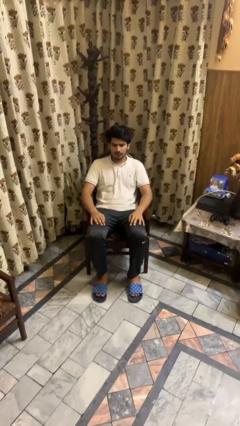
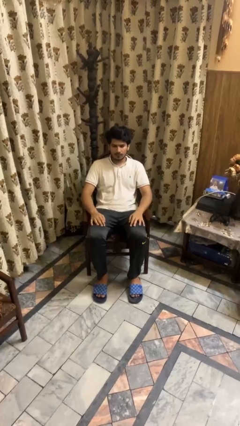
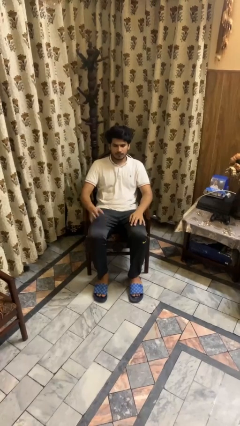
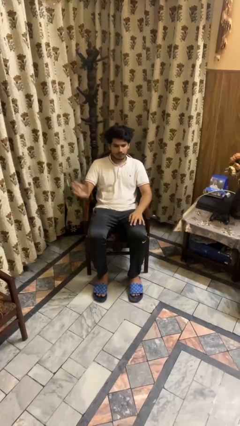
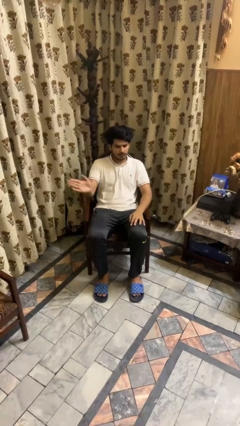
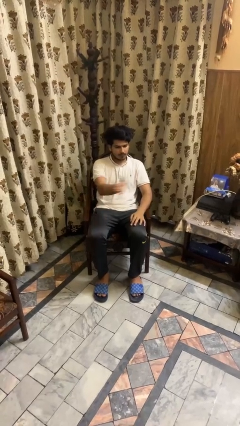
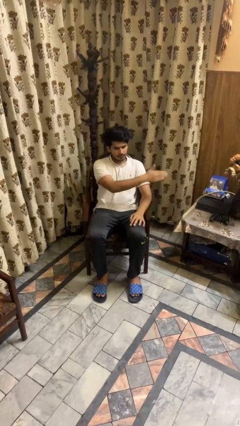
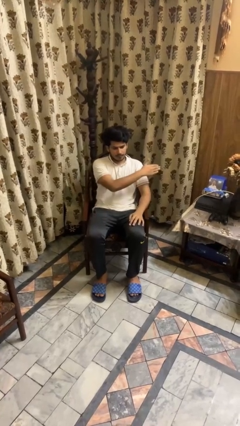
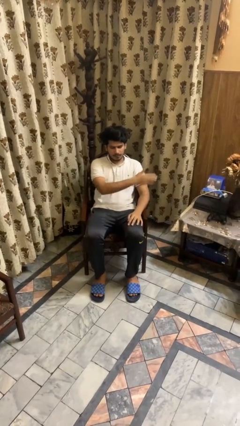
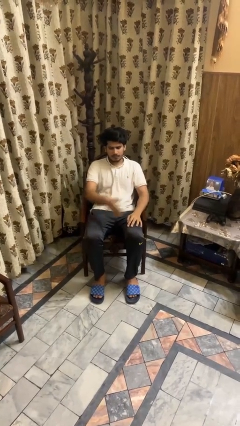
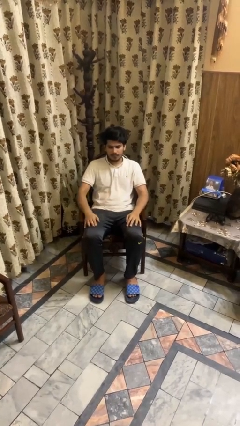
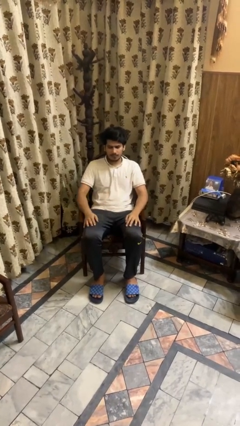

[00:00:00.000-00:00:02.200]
person gestures swipe left

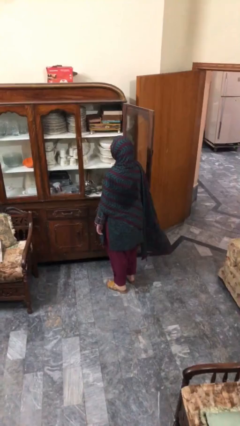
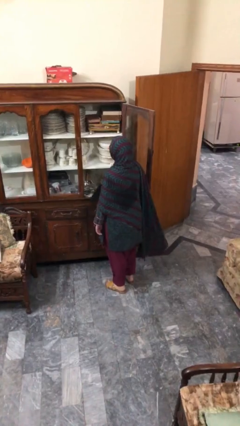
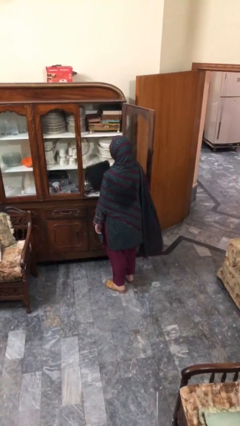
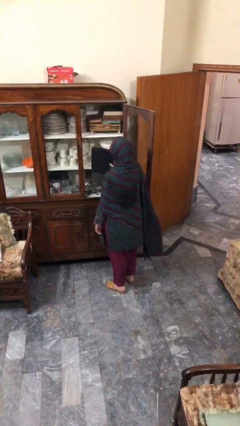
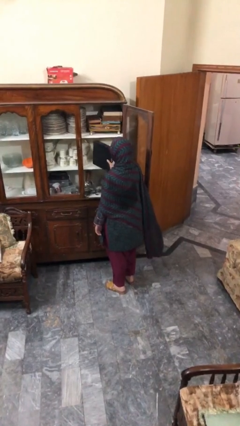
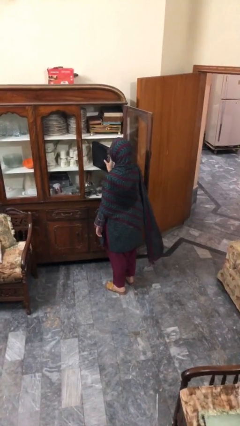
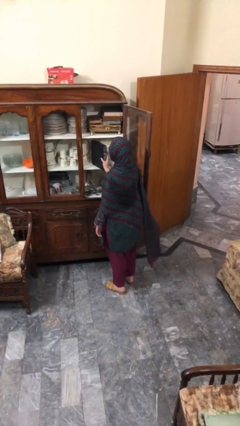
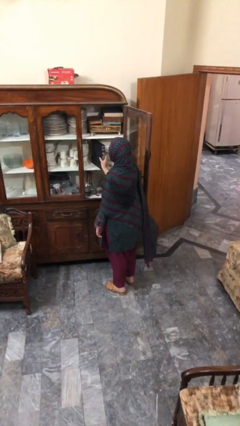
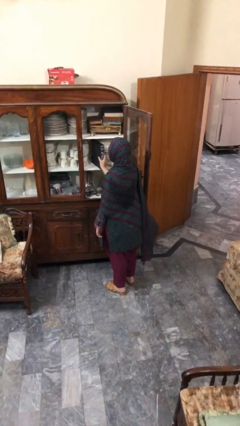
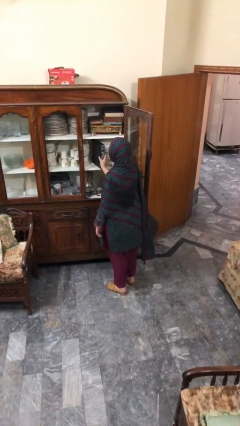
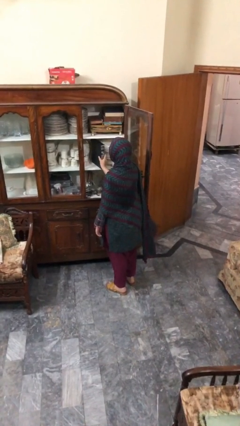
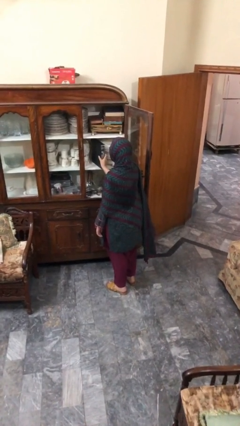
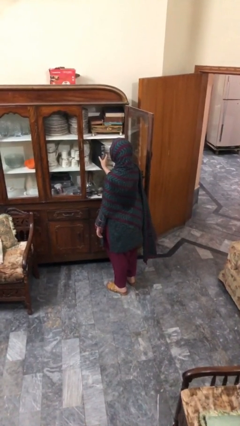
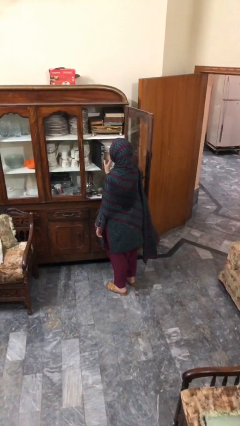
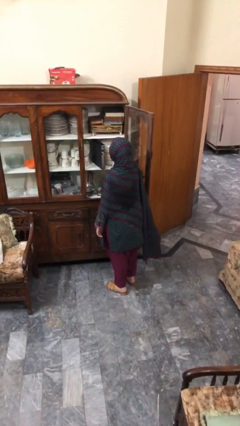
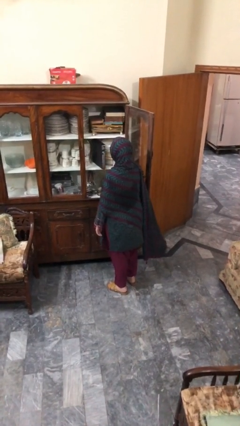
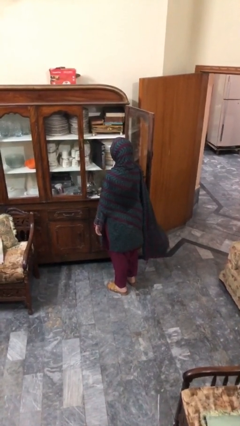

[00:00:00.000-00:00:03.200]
person puts down object on countertop

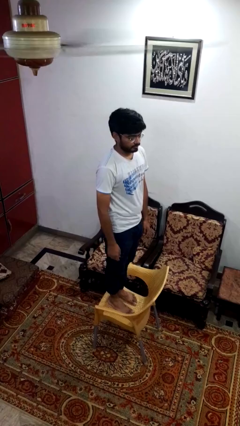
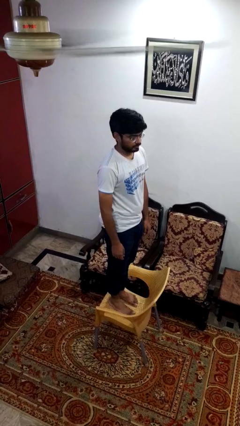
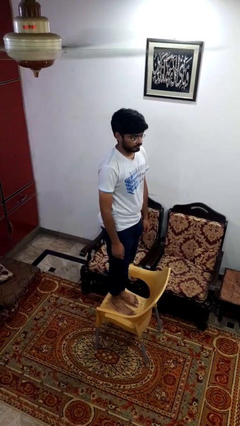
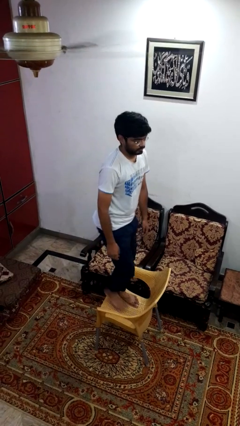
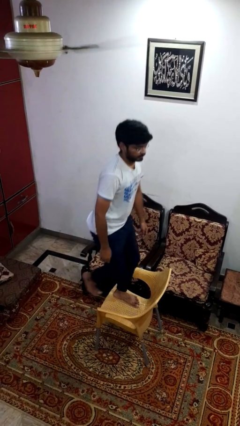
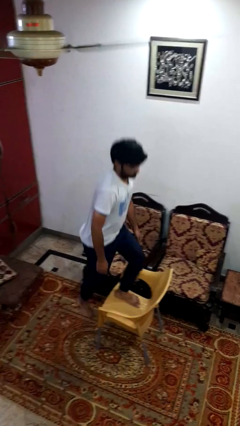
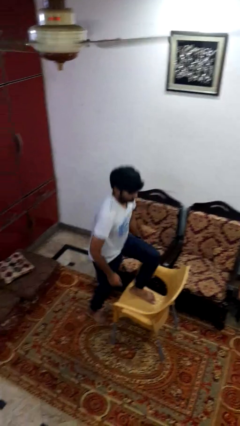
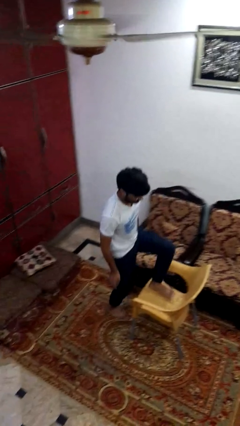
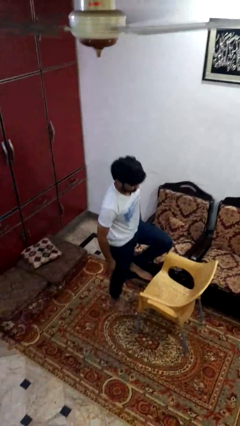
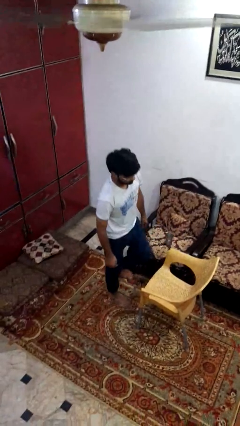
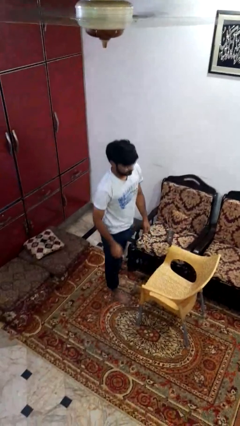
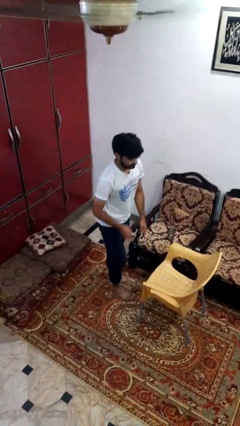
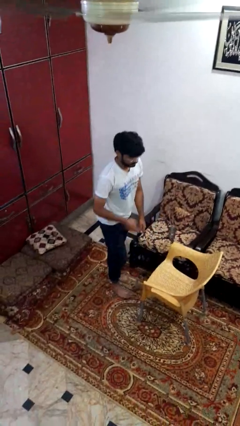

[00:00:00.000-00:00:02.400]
person climbs off chair

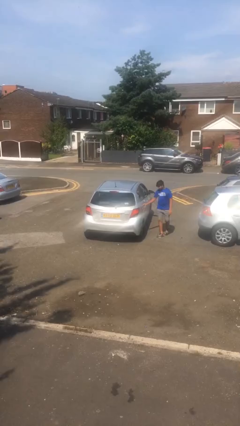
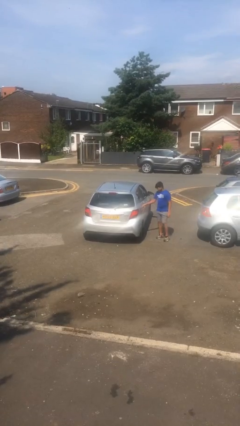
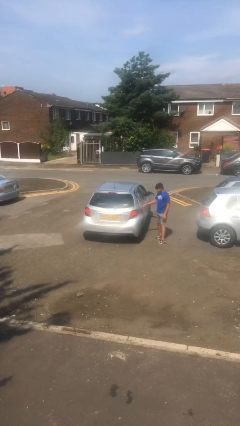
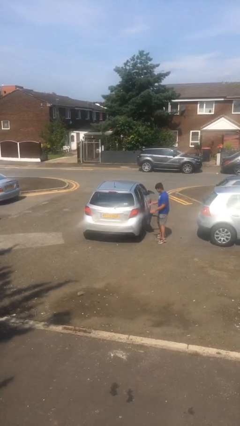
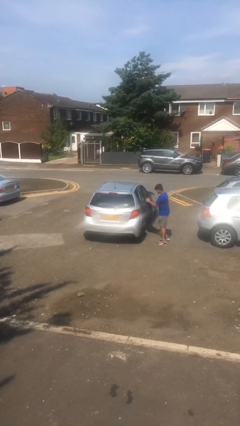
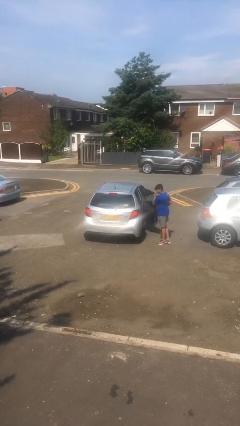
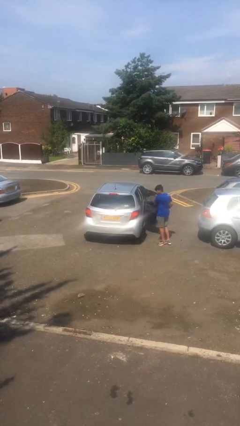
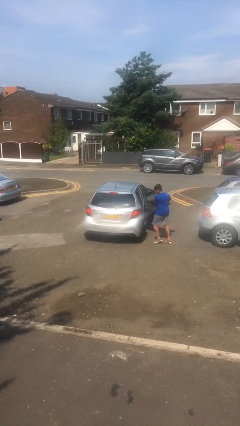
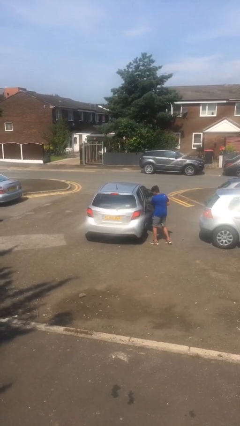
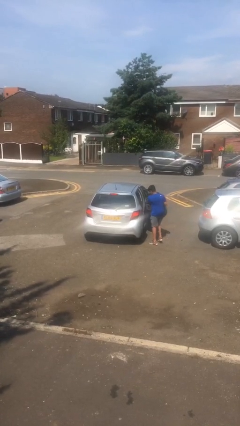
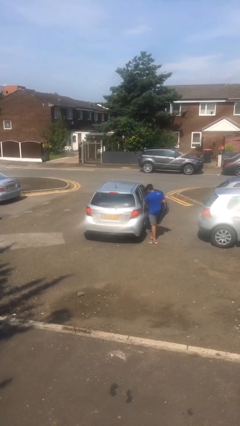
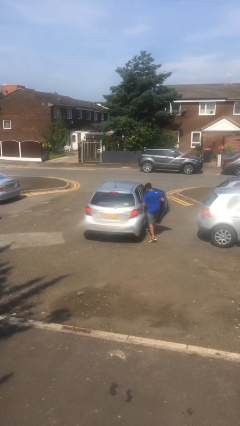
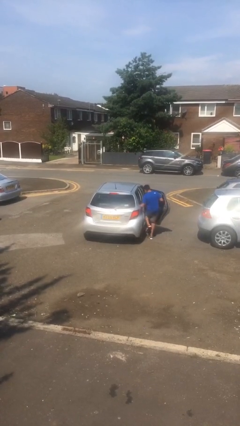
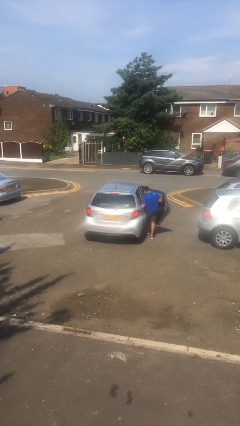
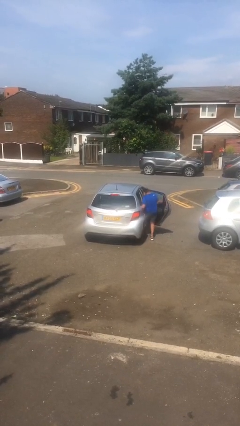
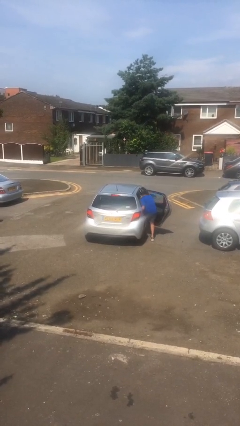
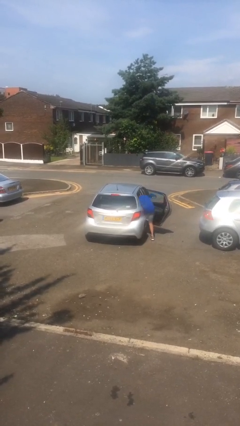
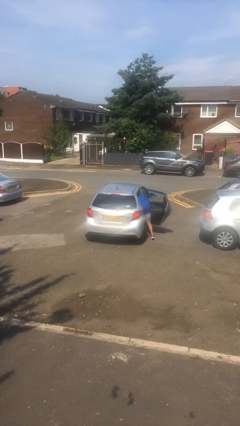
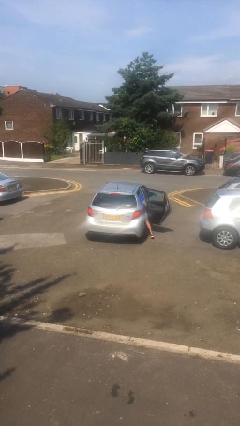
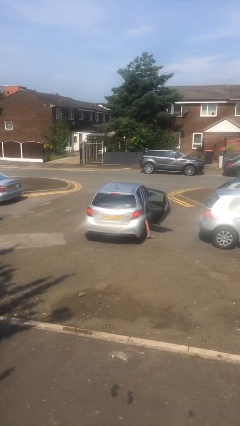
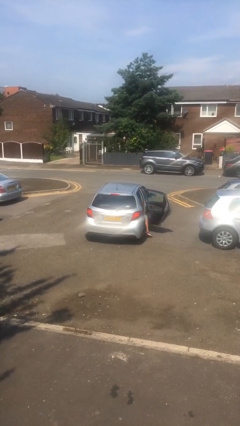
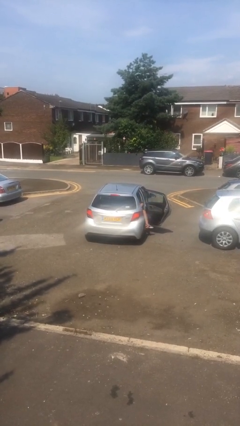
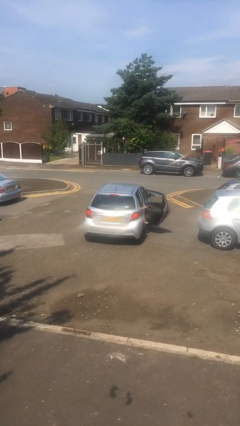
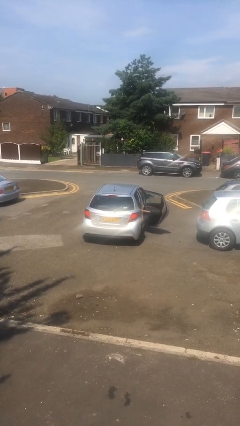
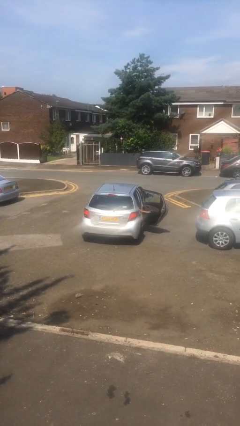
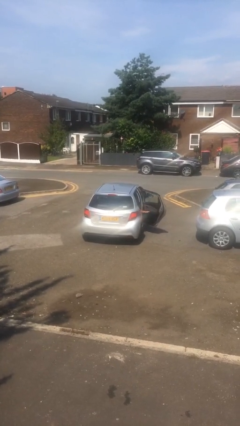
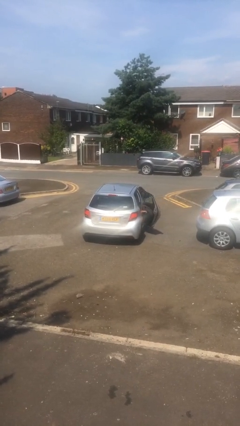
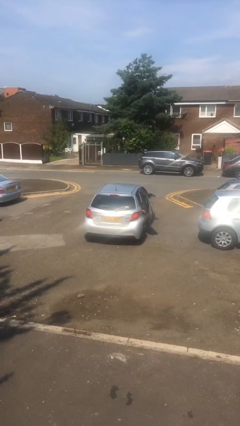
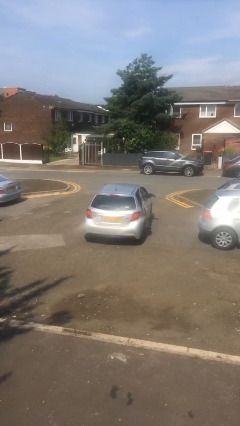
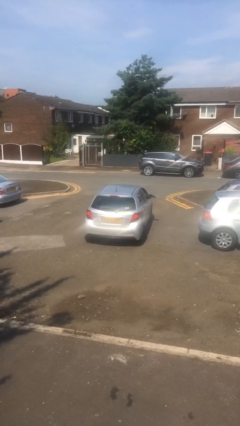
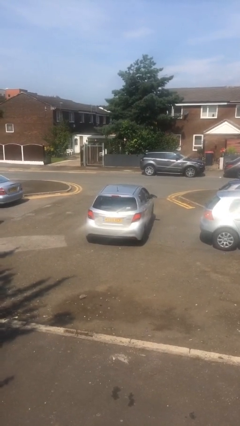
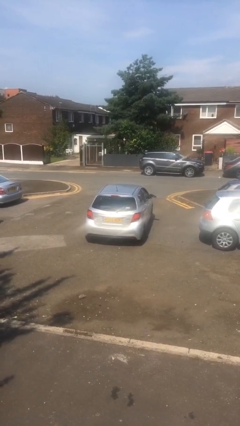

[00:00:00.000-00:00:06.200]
car picks up person

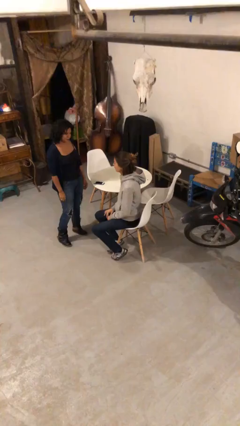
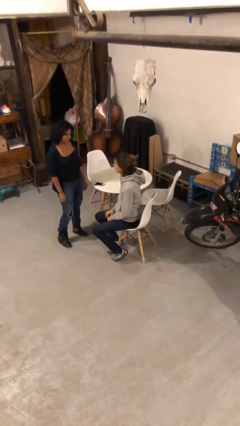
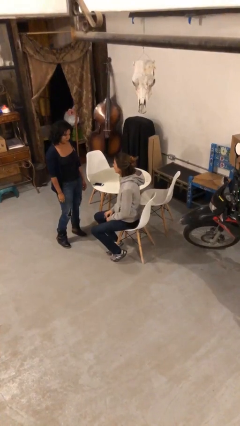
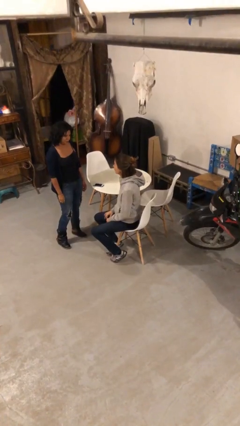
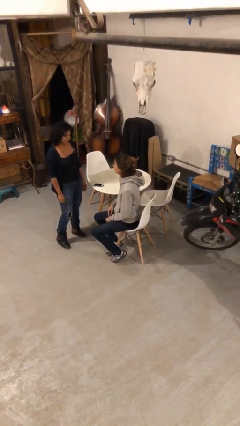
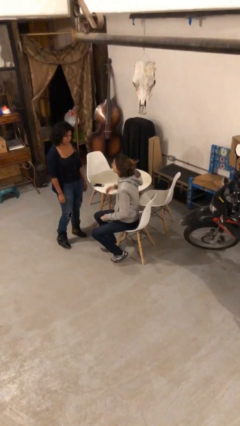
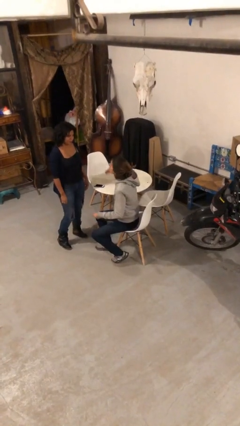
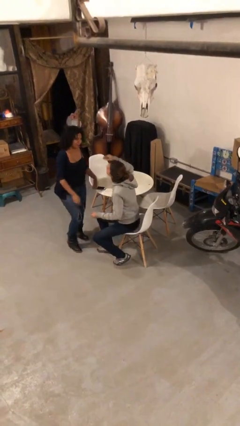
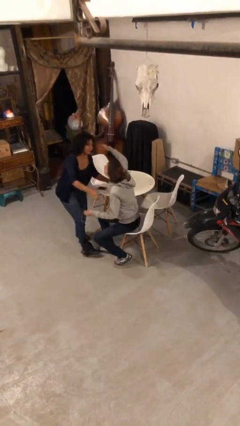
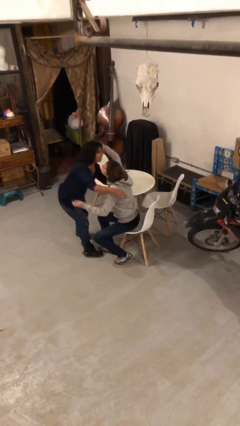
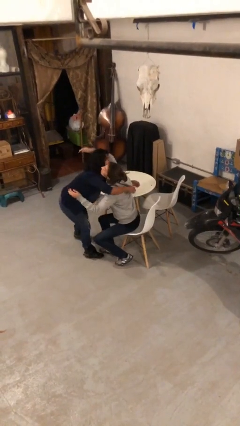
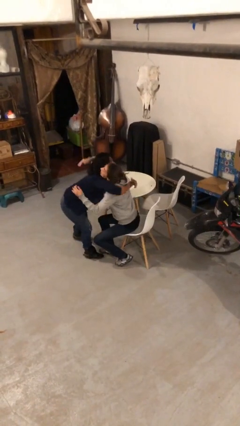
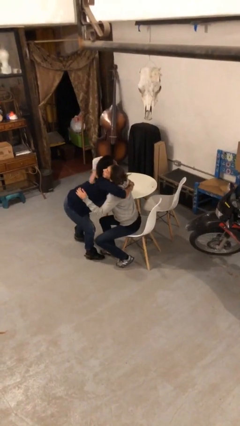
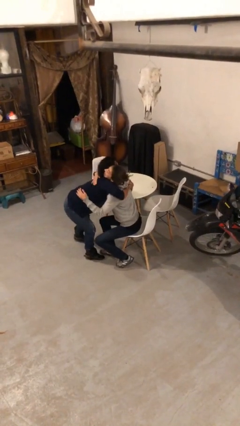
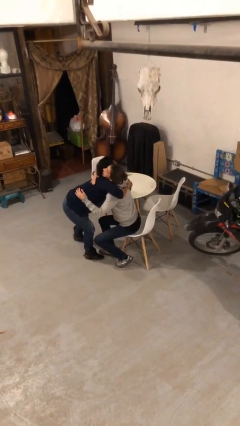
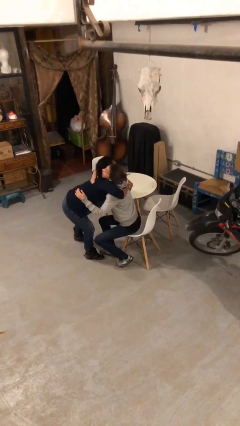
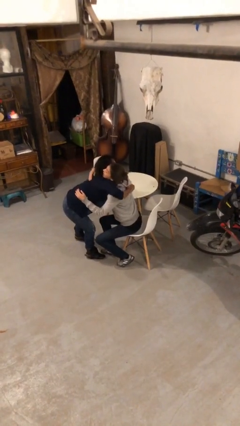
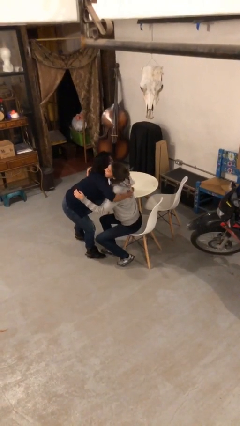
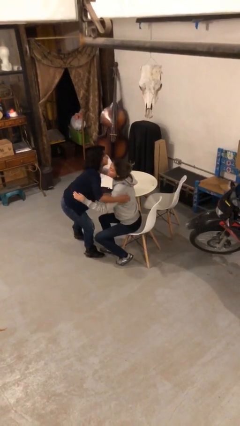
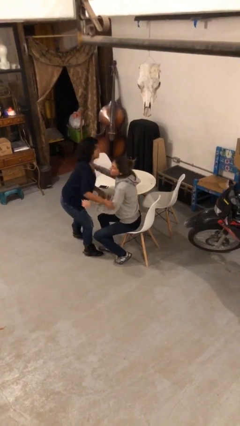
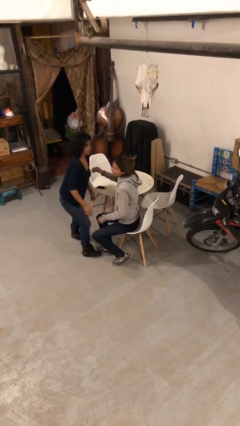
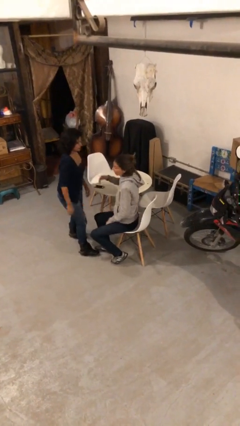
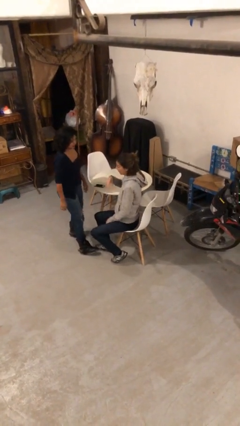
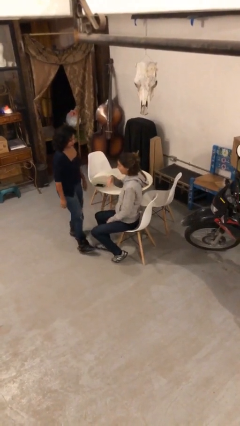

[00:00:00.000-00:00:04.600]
person embraces person
